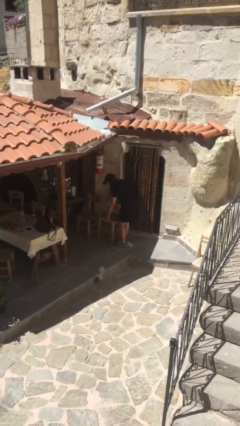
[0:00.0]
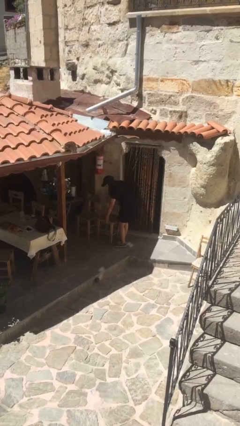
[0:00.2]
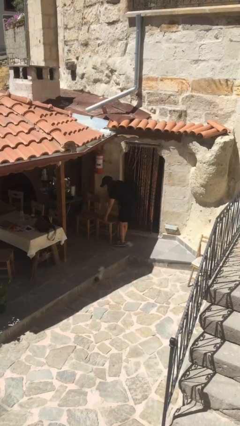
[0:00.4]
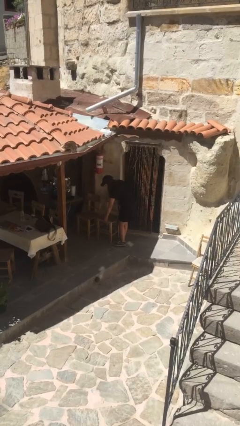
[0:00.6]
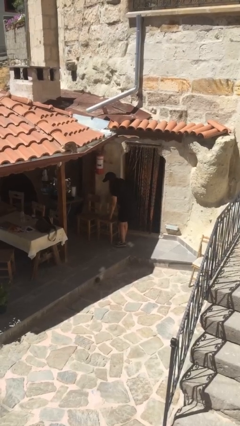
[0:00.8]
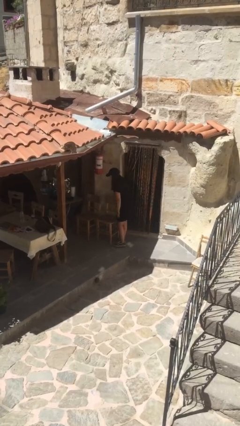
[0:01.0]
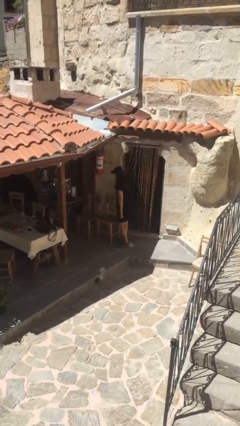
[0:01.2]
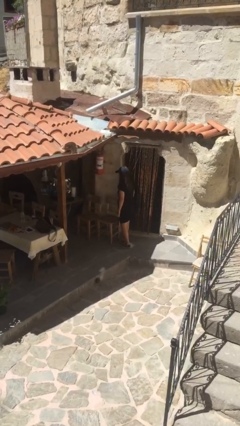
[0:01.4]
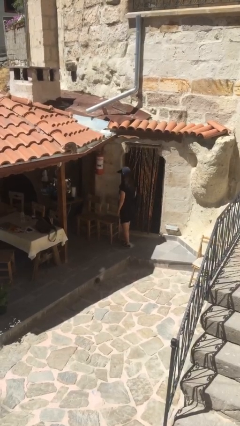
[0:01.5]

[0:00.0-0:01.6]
person puts down object on floor

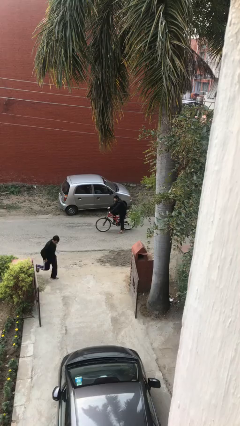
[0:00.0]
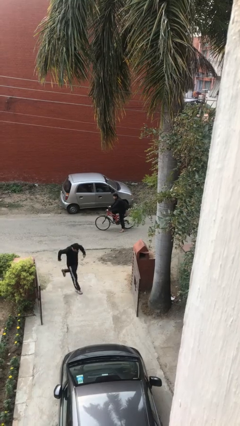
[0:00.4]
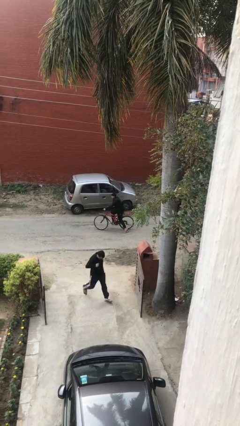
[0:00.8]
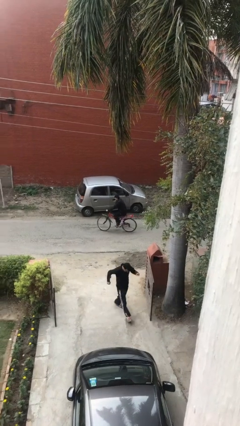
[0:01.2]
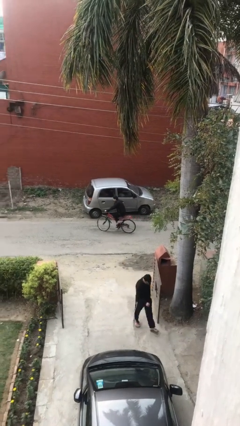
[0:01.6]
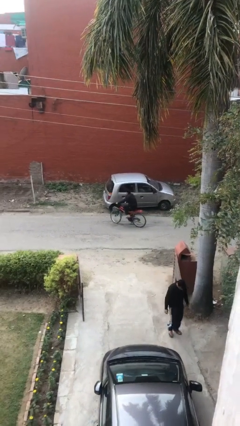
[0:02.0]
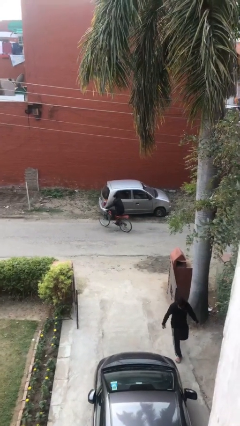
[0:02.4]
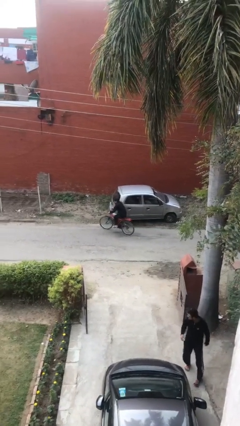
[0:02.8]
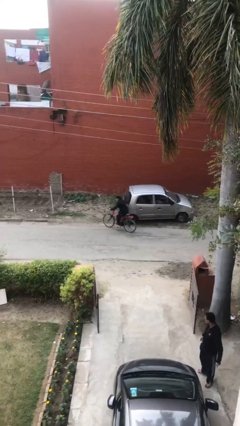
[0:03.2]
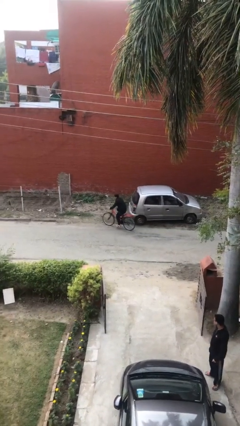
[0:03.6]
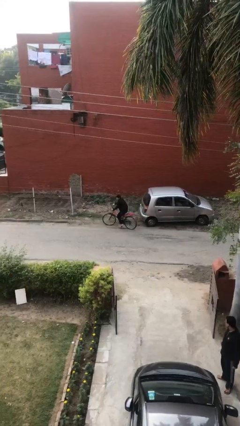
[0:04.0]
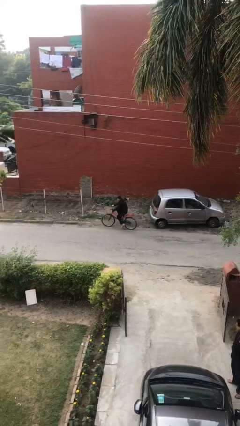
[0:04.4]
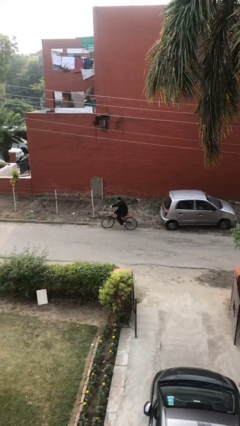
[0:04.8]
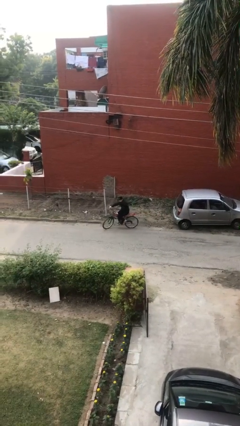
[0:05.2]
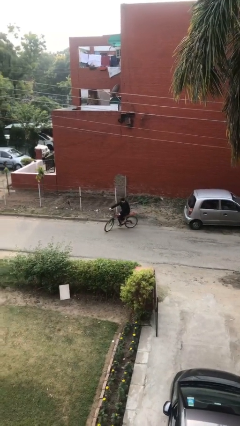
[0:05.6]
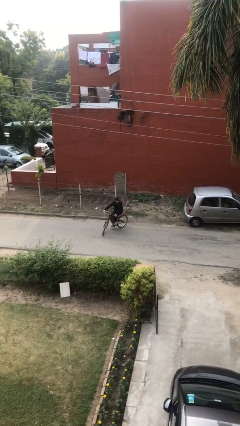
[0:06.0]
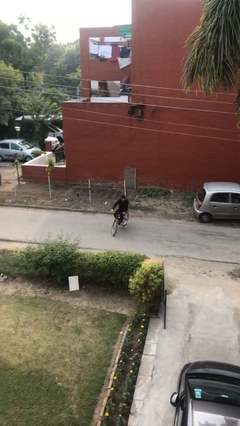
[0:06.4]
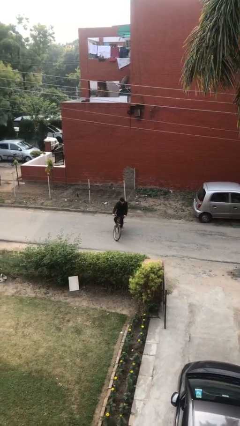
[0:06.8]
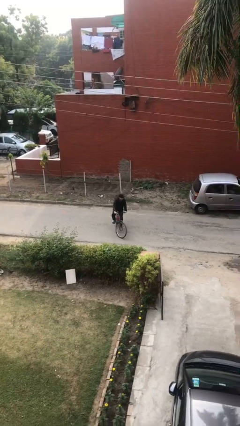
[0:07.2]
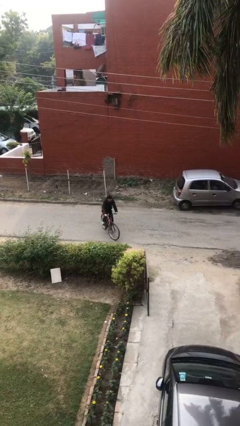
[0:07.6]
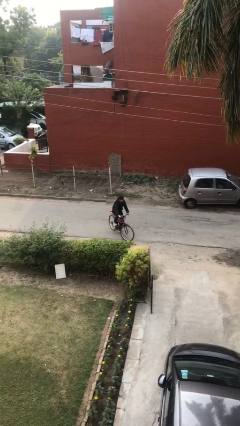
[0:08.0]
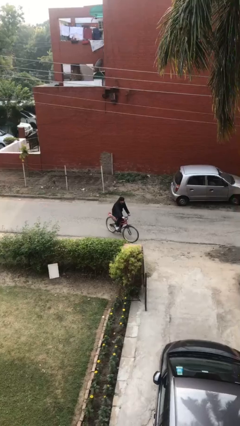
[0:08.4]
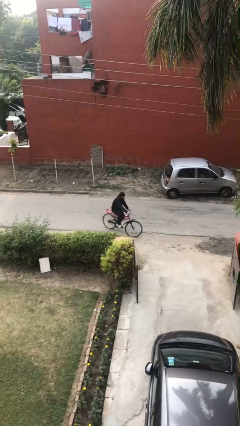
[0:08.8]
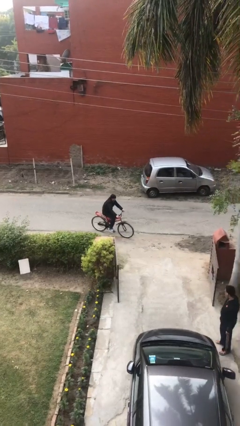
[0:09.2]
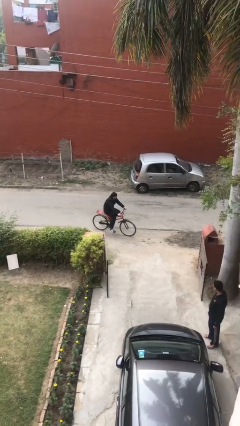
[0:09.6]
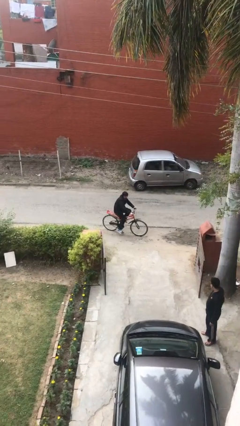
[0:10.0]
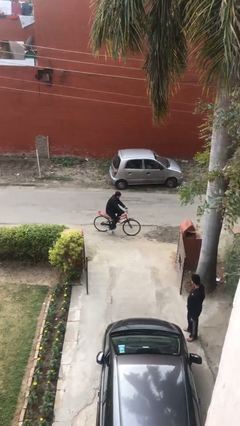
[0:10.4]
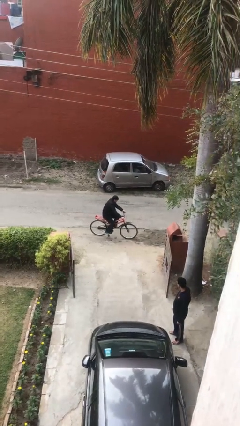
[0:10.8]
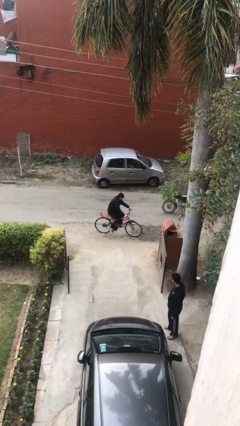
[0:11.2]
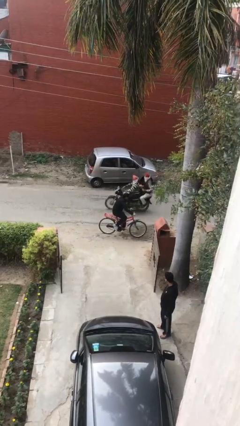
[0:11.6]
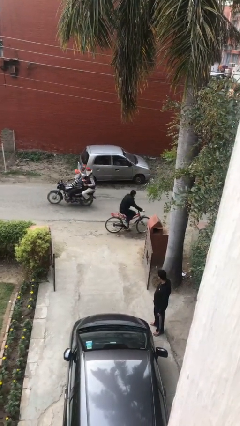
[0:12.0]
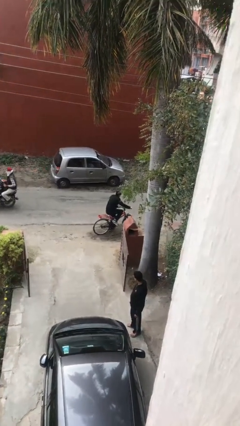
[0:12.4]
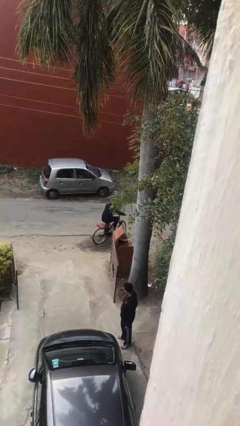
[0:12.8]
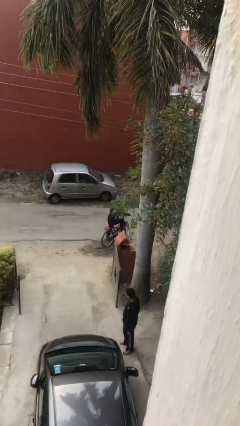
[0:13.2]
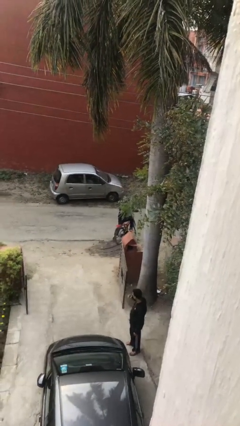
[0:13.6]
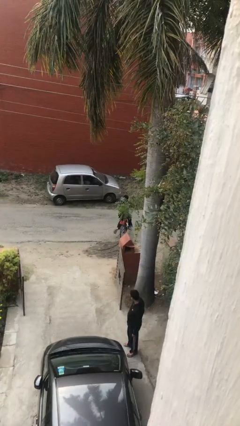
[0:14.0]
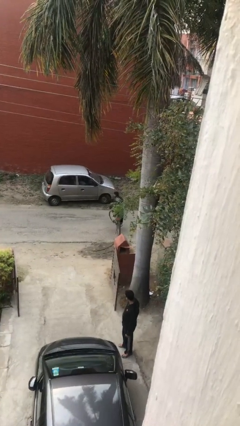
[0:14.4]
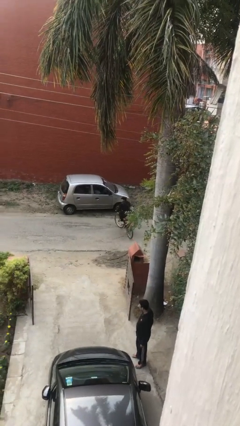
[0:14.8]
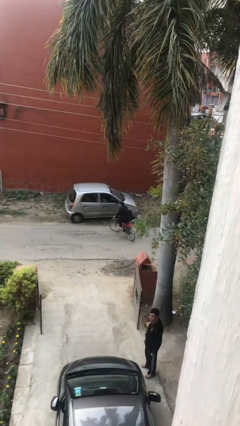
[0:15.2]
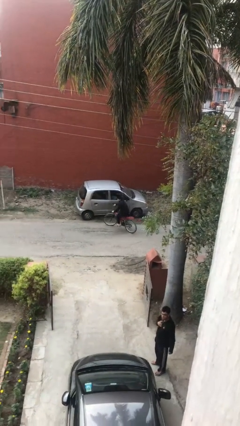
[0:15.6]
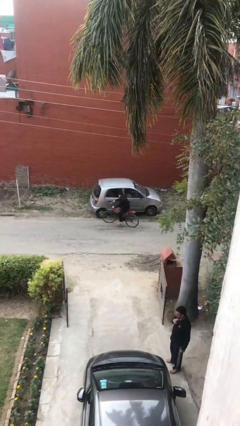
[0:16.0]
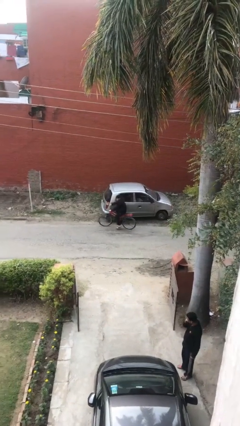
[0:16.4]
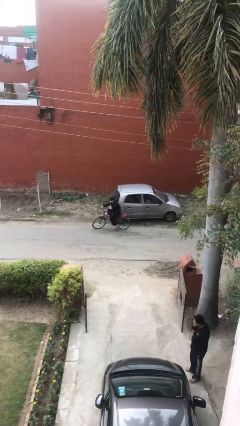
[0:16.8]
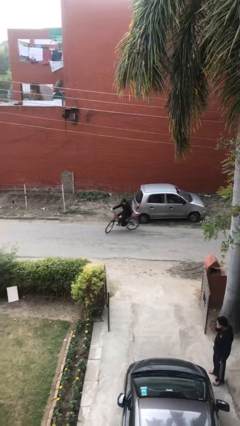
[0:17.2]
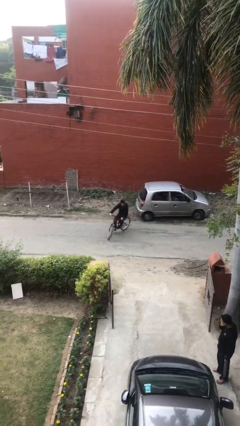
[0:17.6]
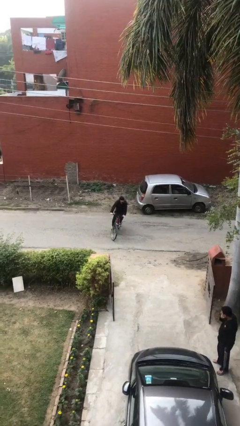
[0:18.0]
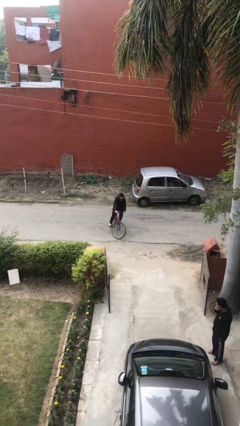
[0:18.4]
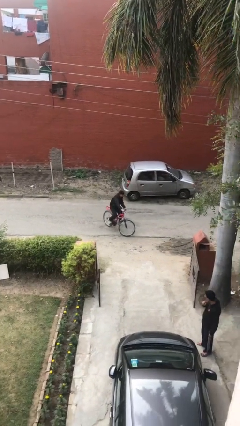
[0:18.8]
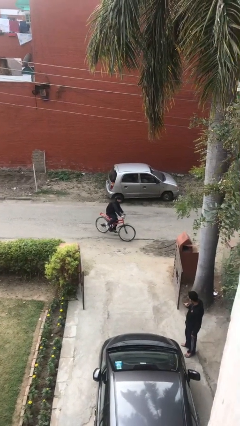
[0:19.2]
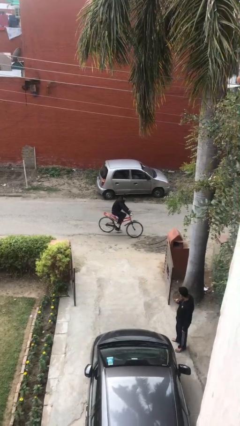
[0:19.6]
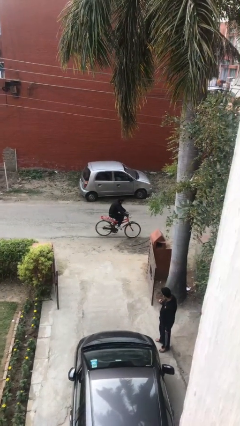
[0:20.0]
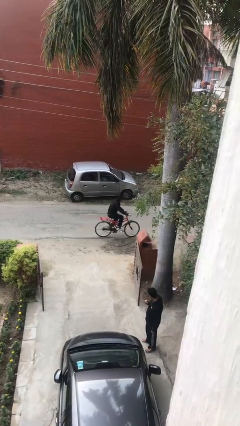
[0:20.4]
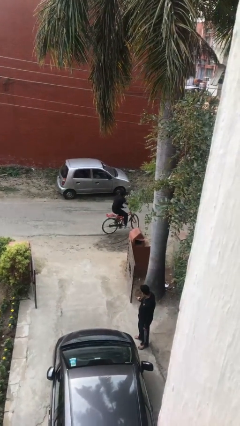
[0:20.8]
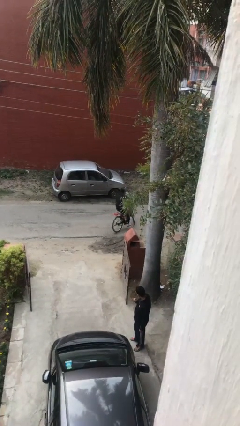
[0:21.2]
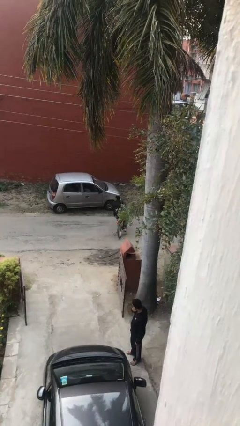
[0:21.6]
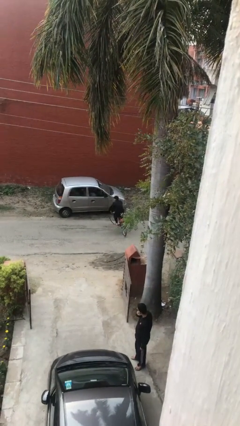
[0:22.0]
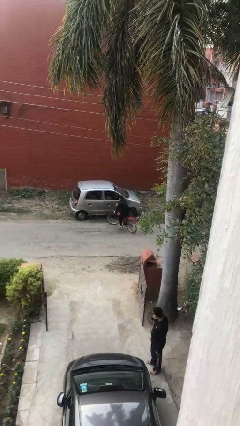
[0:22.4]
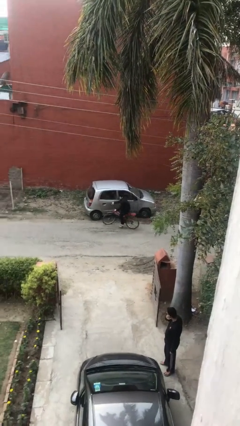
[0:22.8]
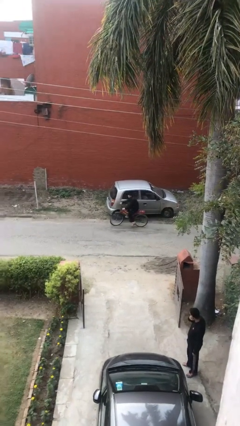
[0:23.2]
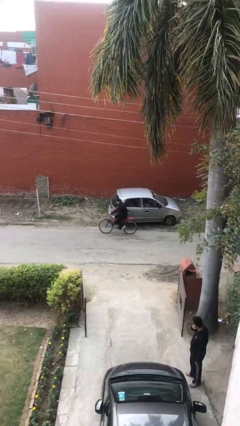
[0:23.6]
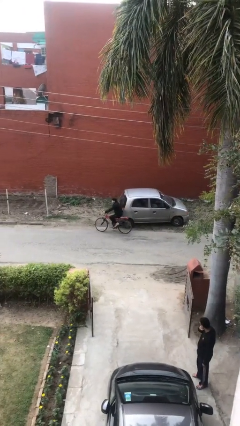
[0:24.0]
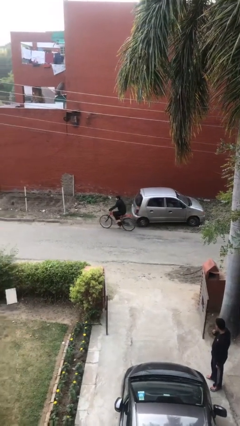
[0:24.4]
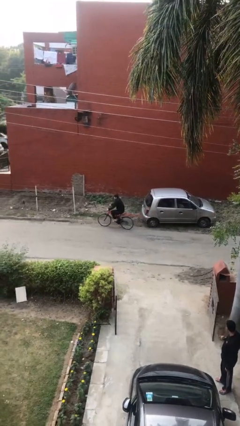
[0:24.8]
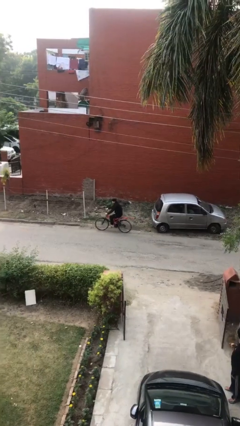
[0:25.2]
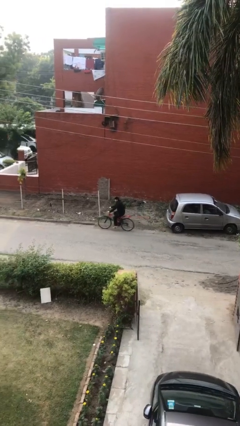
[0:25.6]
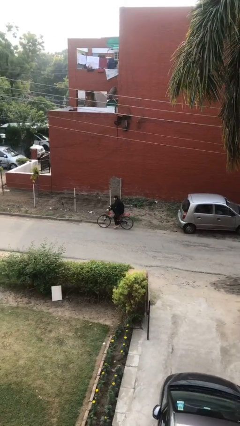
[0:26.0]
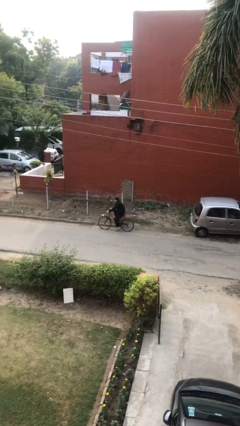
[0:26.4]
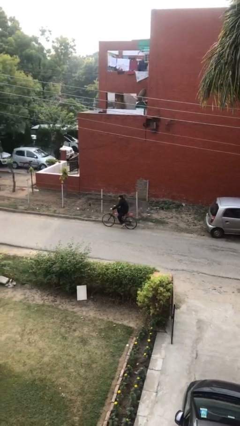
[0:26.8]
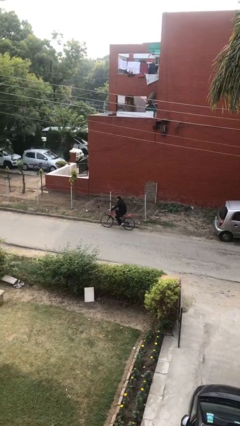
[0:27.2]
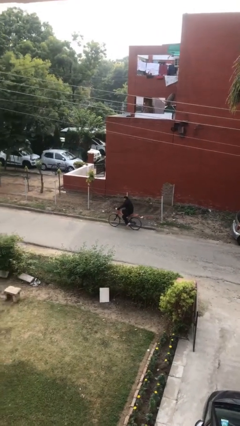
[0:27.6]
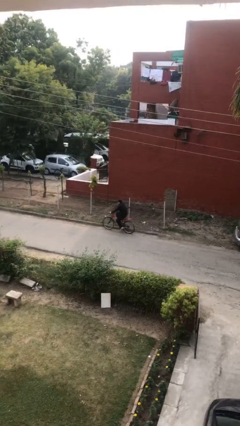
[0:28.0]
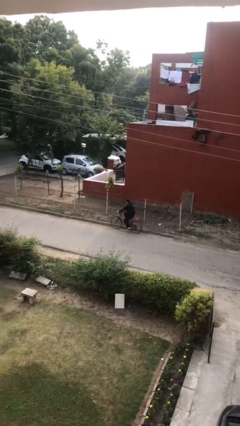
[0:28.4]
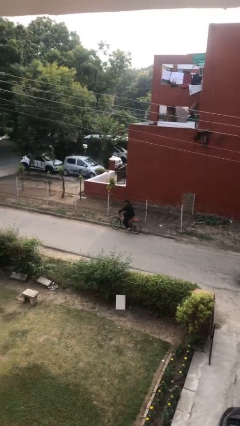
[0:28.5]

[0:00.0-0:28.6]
person rides bicycle

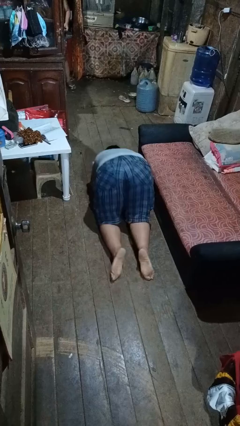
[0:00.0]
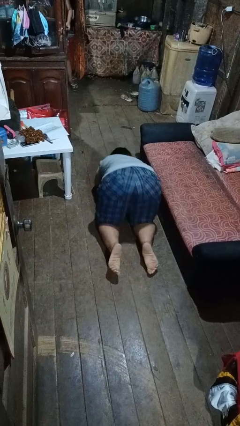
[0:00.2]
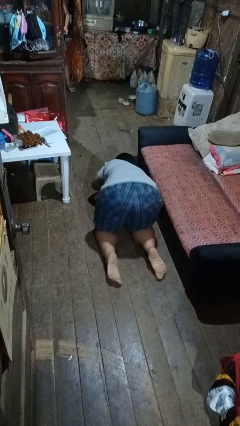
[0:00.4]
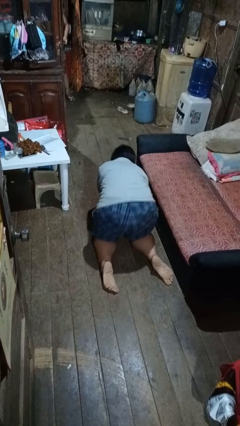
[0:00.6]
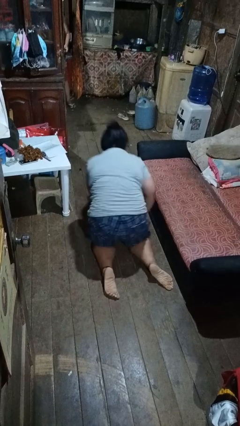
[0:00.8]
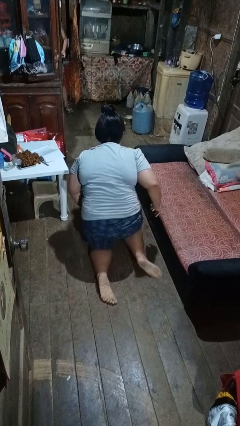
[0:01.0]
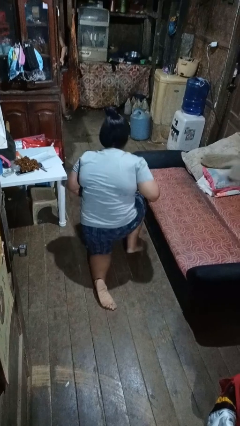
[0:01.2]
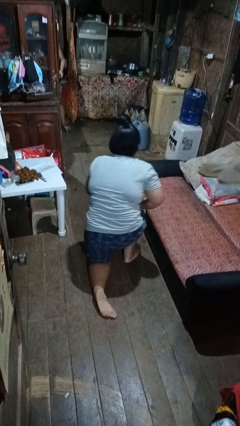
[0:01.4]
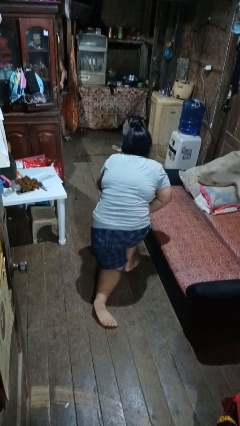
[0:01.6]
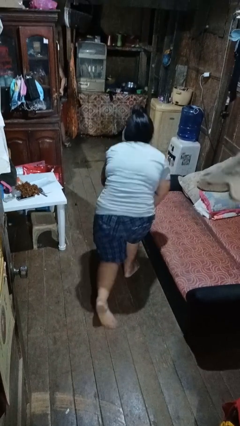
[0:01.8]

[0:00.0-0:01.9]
person stands up from floor
